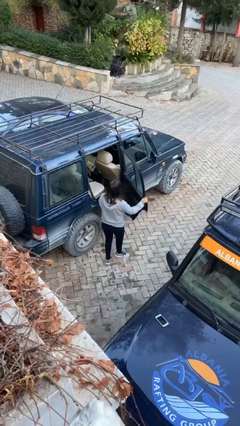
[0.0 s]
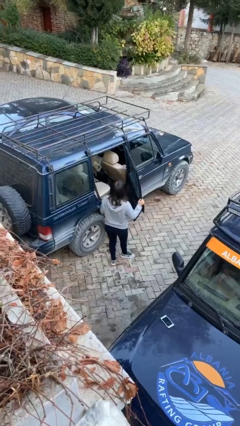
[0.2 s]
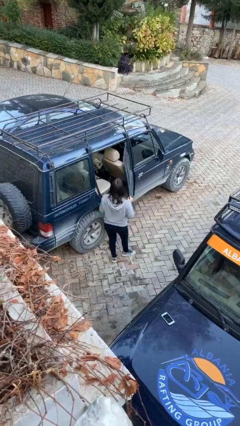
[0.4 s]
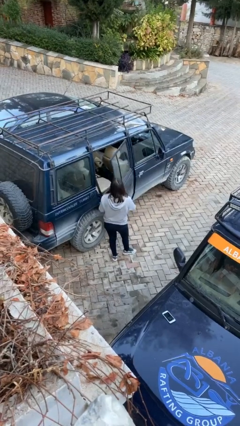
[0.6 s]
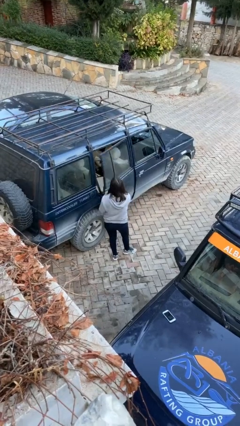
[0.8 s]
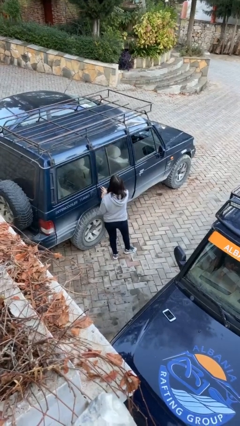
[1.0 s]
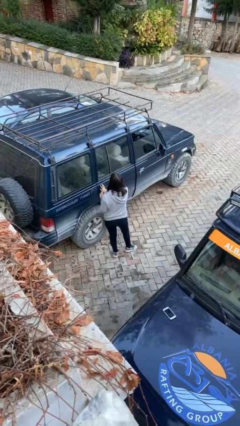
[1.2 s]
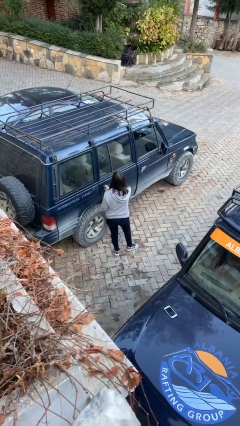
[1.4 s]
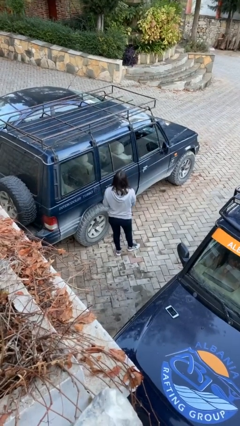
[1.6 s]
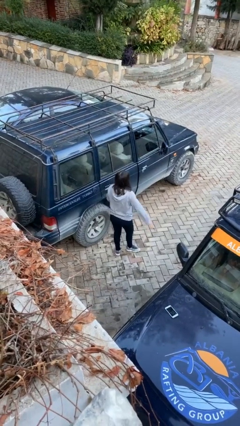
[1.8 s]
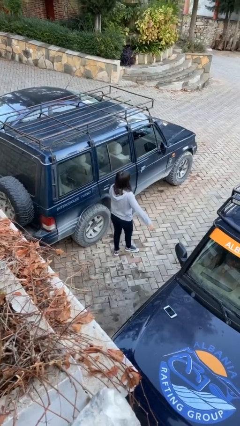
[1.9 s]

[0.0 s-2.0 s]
person closes car door

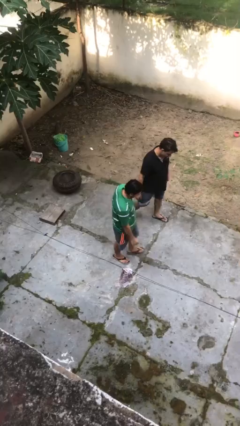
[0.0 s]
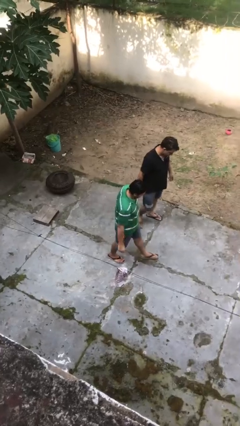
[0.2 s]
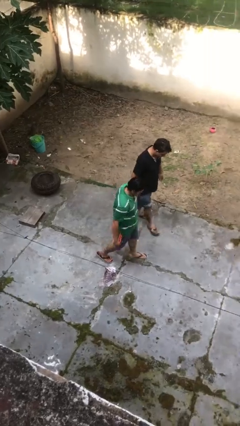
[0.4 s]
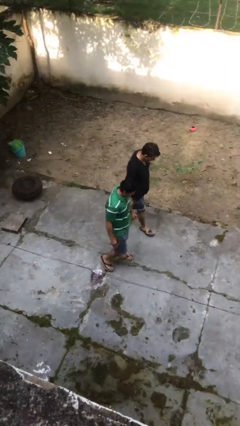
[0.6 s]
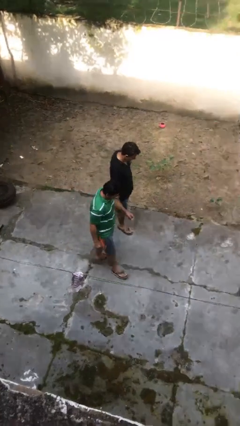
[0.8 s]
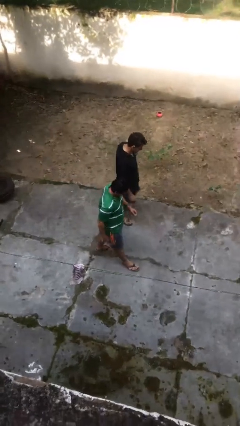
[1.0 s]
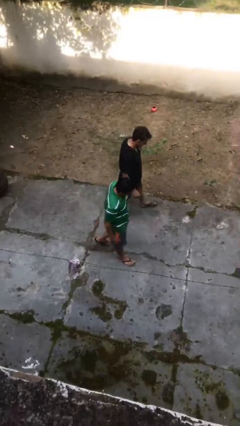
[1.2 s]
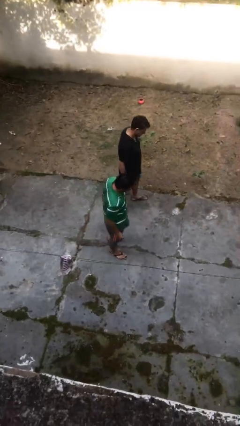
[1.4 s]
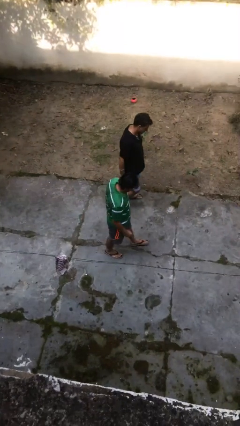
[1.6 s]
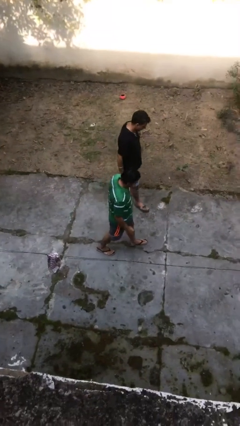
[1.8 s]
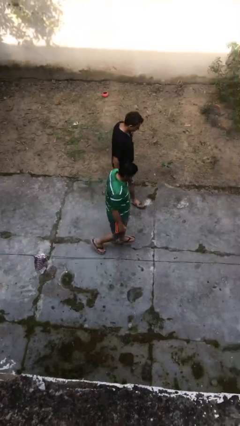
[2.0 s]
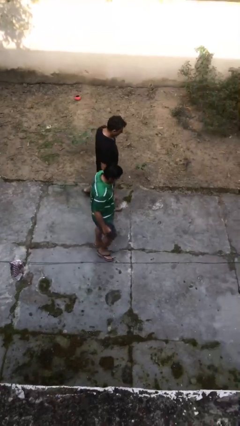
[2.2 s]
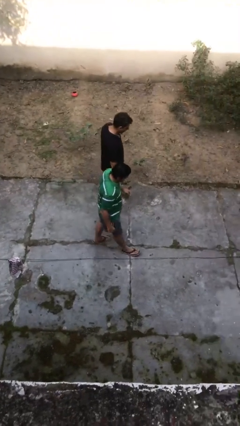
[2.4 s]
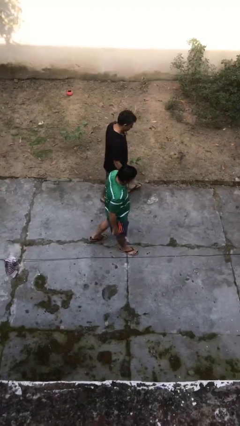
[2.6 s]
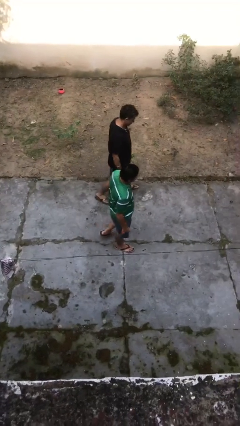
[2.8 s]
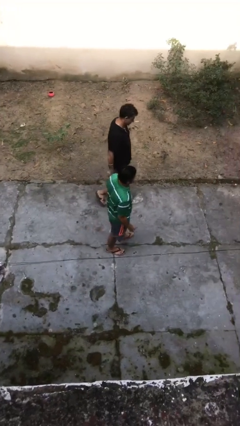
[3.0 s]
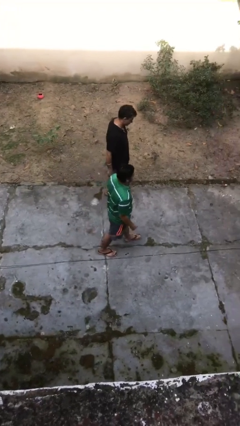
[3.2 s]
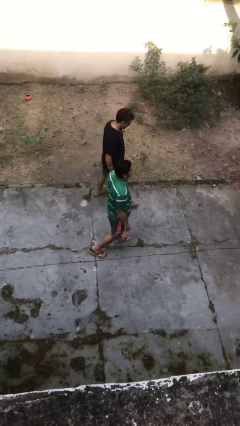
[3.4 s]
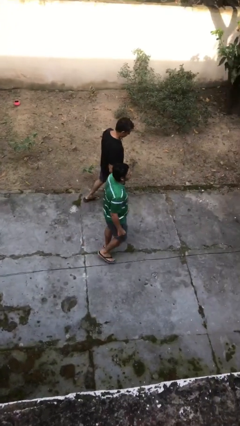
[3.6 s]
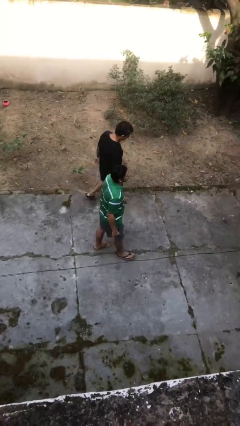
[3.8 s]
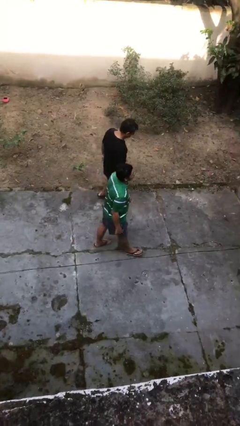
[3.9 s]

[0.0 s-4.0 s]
person talks to person

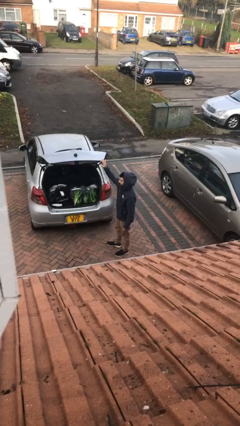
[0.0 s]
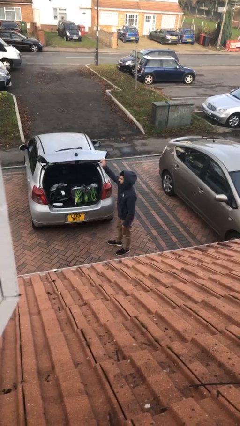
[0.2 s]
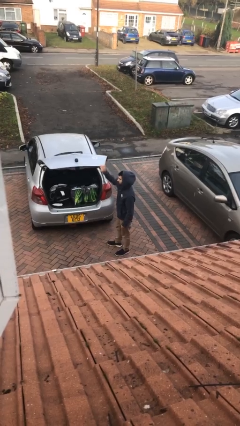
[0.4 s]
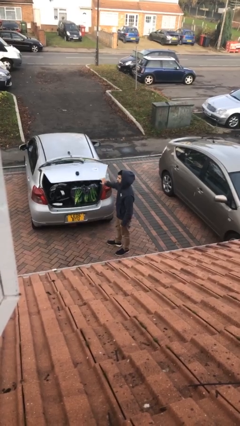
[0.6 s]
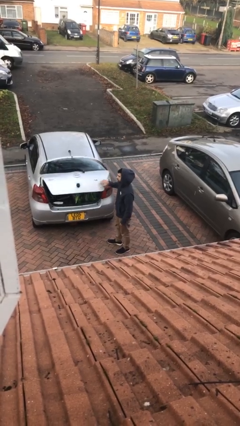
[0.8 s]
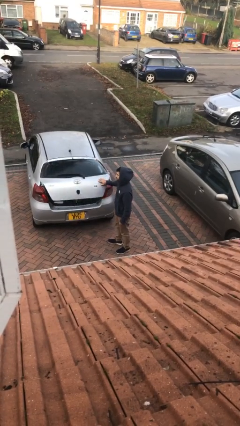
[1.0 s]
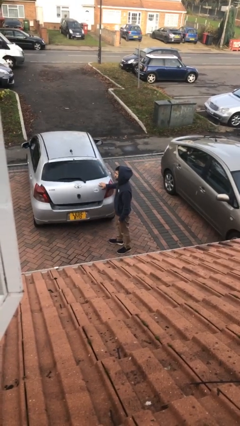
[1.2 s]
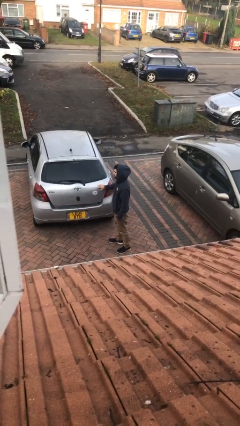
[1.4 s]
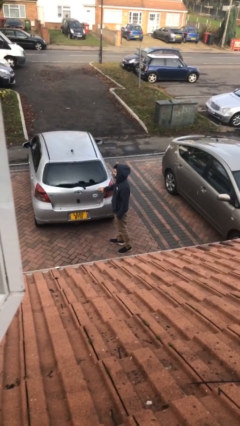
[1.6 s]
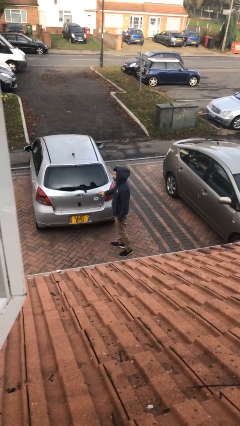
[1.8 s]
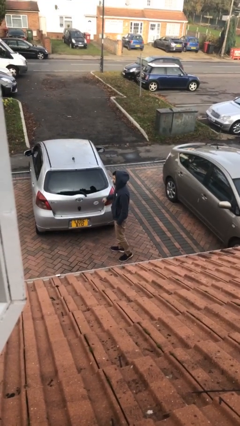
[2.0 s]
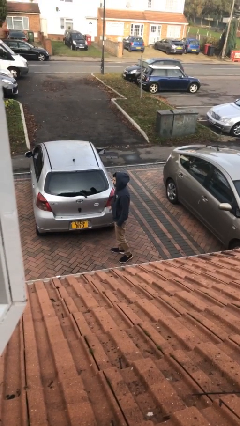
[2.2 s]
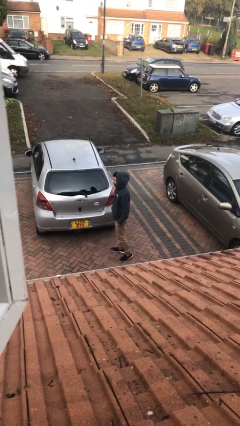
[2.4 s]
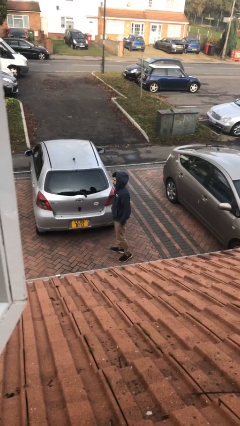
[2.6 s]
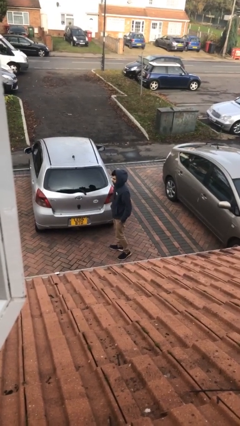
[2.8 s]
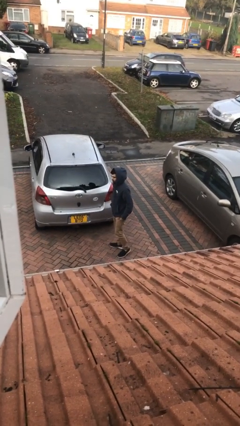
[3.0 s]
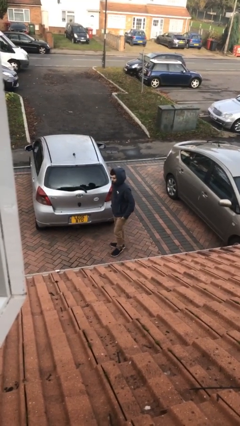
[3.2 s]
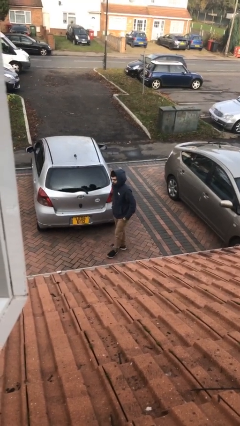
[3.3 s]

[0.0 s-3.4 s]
person closes car trunk

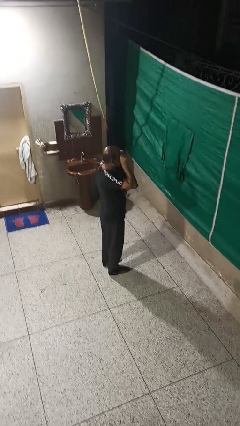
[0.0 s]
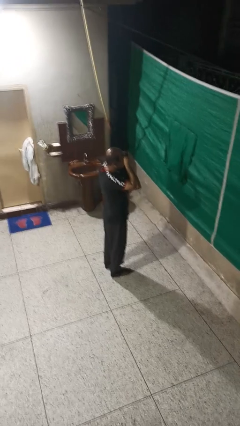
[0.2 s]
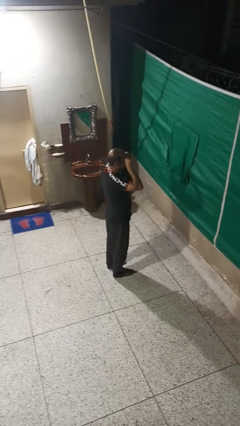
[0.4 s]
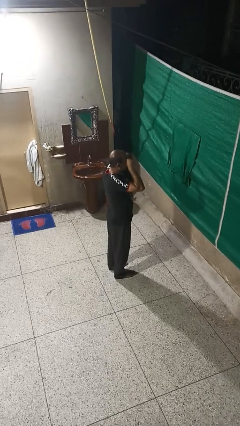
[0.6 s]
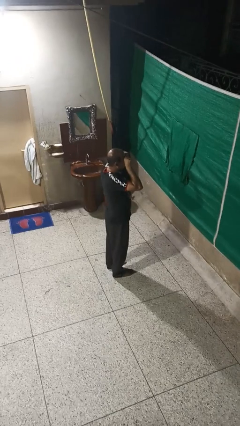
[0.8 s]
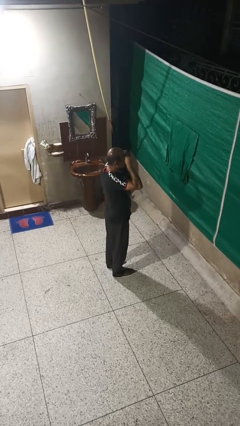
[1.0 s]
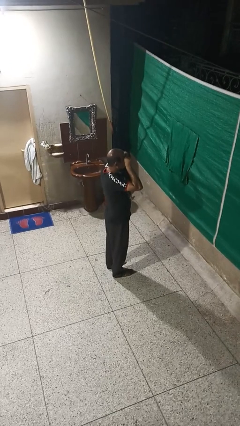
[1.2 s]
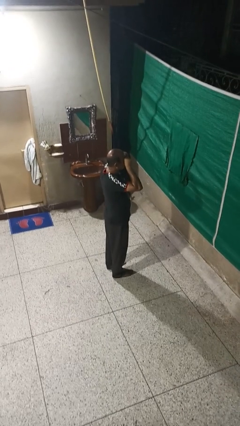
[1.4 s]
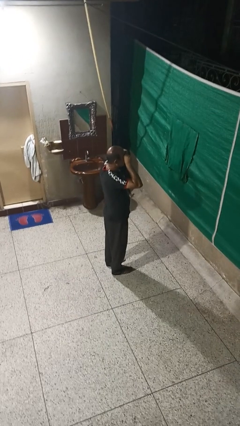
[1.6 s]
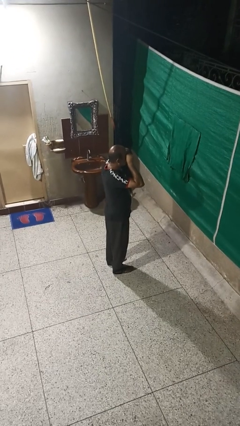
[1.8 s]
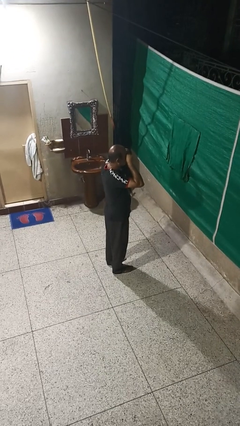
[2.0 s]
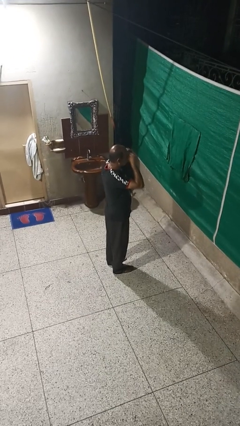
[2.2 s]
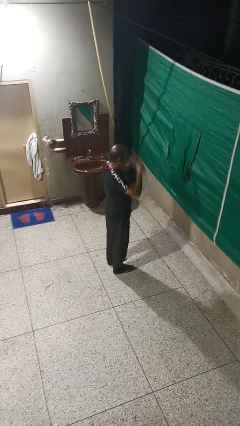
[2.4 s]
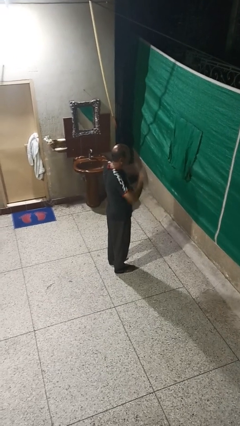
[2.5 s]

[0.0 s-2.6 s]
person rubs eyes

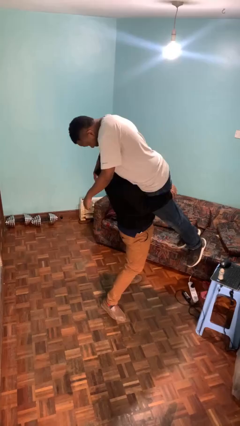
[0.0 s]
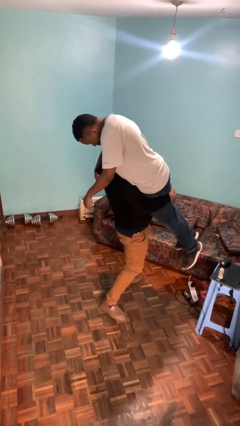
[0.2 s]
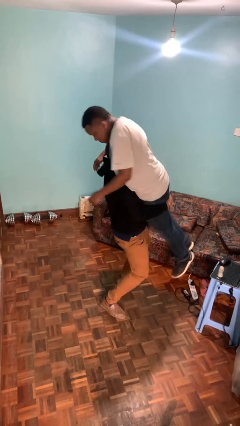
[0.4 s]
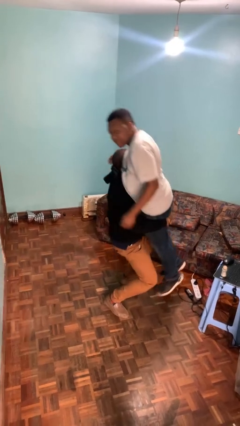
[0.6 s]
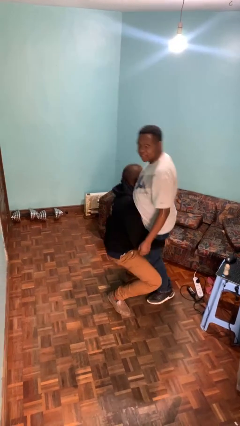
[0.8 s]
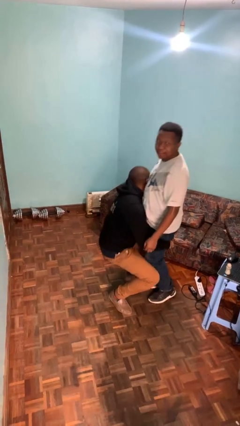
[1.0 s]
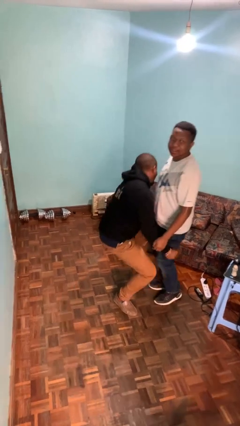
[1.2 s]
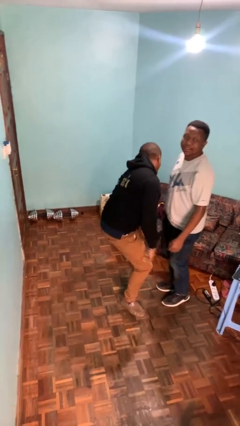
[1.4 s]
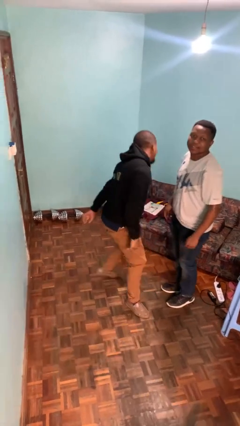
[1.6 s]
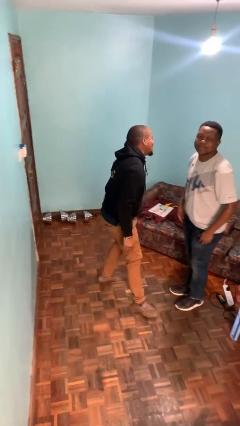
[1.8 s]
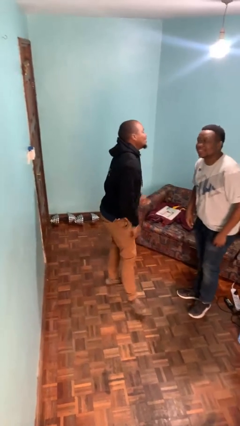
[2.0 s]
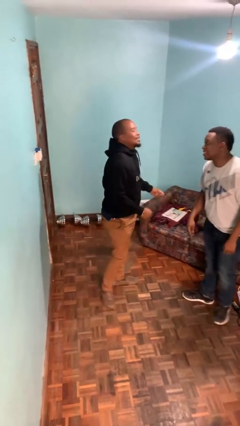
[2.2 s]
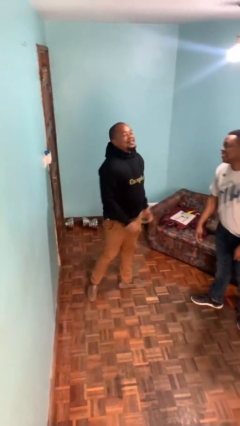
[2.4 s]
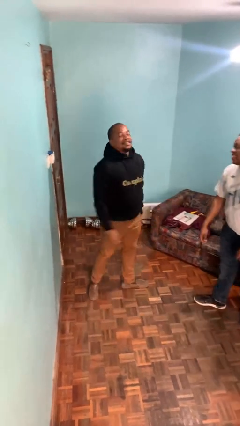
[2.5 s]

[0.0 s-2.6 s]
person puts down person

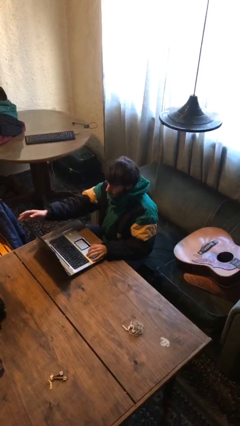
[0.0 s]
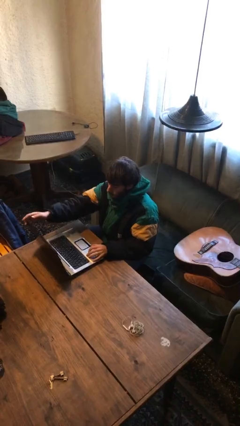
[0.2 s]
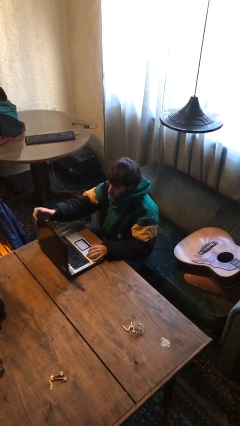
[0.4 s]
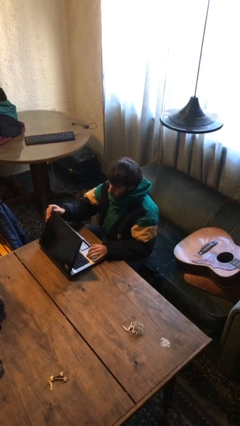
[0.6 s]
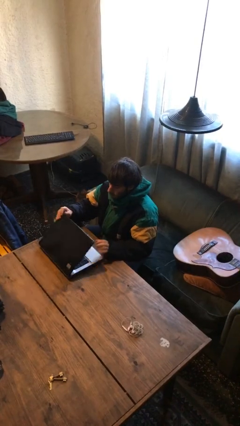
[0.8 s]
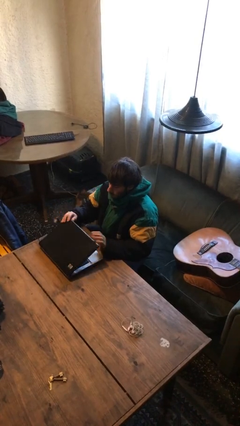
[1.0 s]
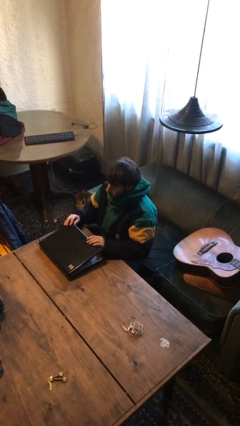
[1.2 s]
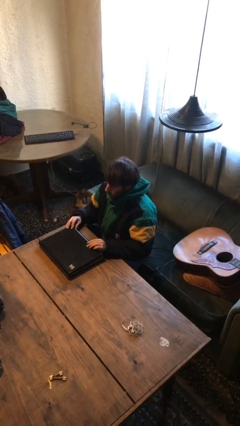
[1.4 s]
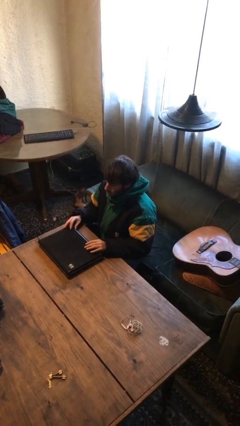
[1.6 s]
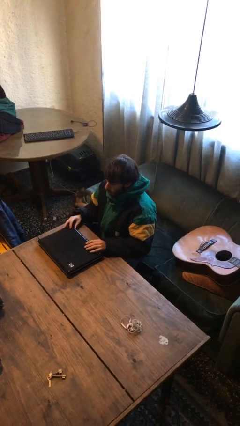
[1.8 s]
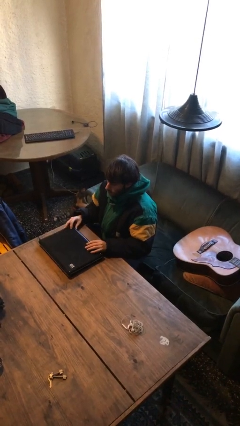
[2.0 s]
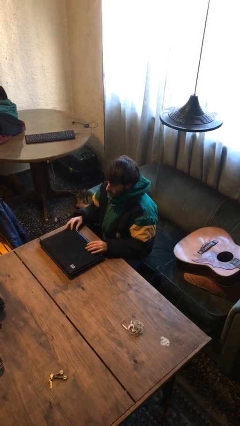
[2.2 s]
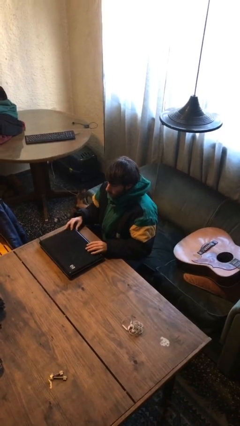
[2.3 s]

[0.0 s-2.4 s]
person closes laptop

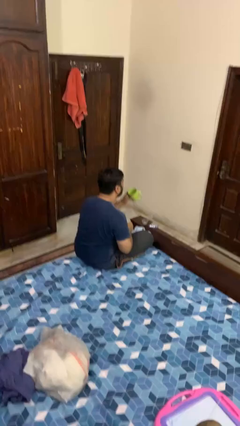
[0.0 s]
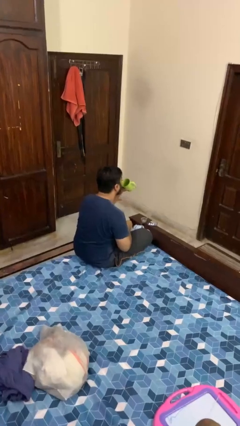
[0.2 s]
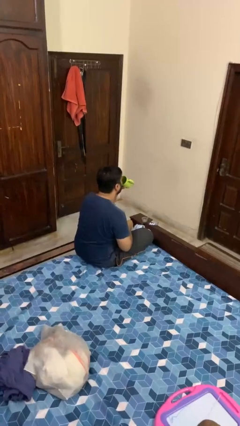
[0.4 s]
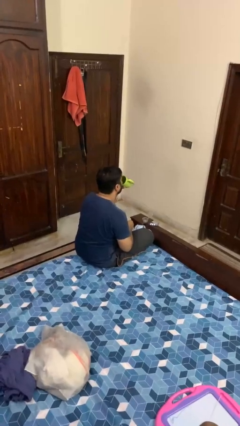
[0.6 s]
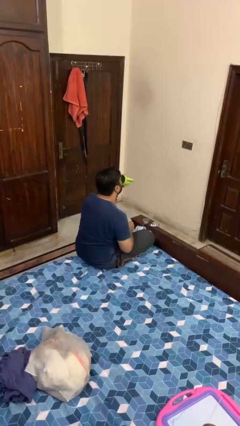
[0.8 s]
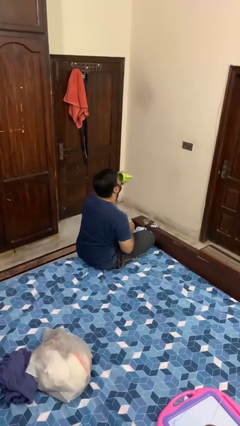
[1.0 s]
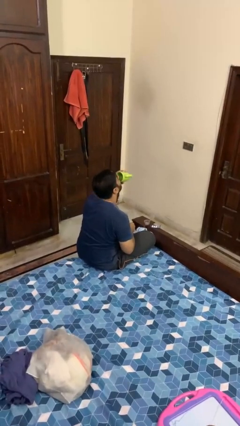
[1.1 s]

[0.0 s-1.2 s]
person drinks from cup
